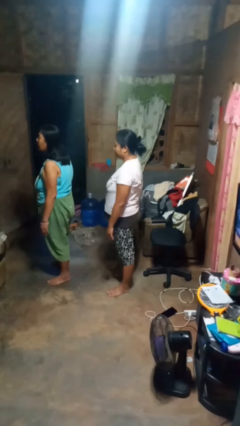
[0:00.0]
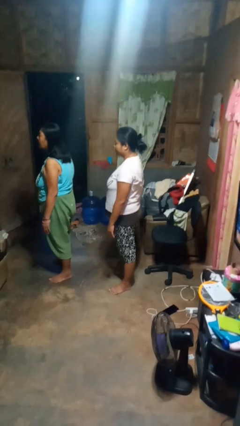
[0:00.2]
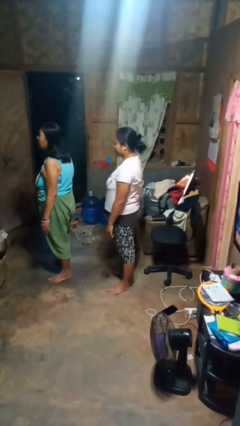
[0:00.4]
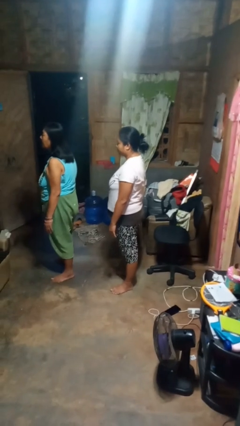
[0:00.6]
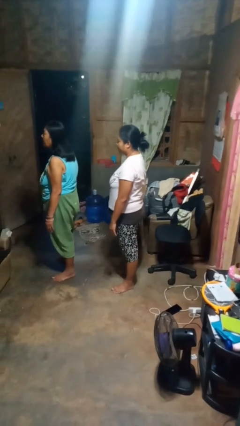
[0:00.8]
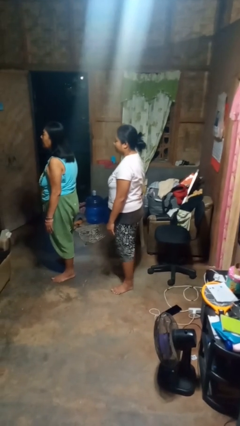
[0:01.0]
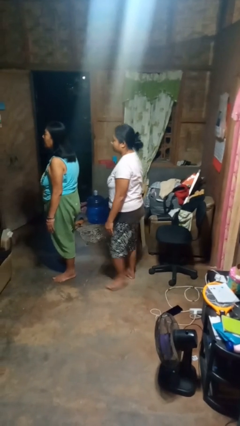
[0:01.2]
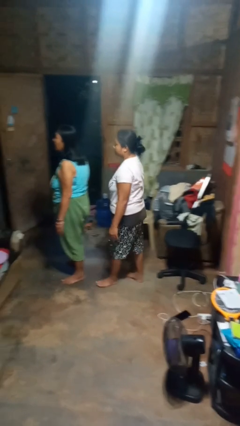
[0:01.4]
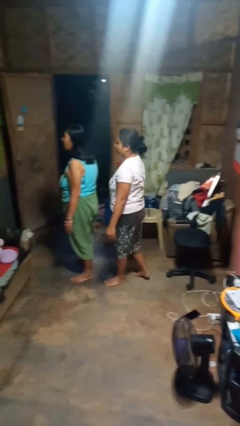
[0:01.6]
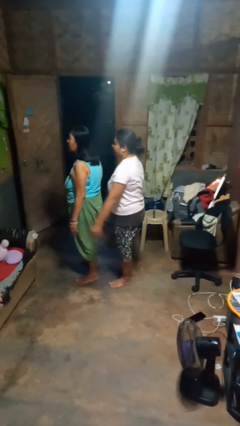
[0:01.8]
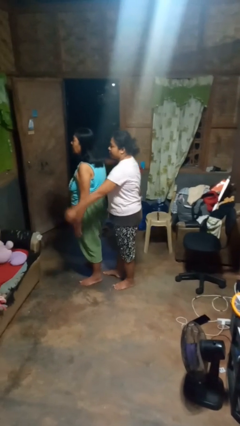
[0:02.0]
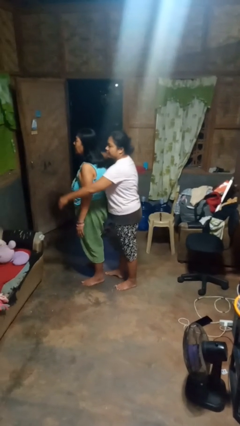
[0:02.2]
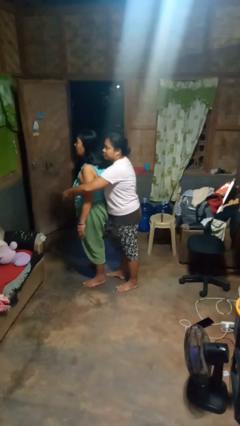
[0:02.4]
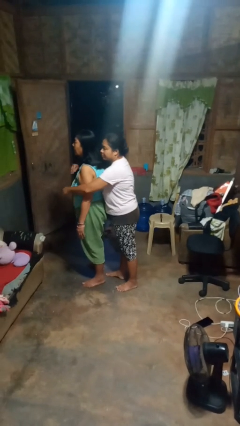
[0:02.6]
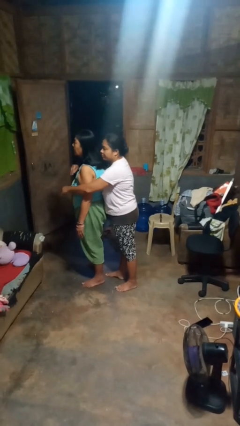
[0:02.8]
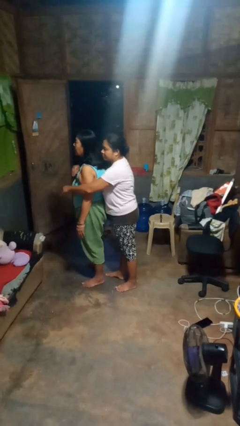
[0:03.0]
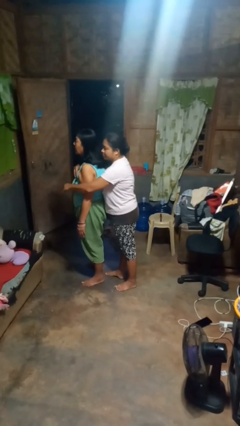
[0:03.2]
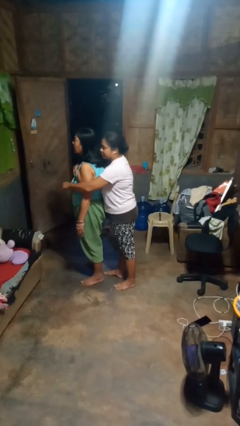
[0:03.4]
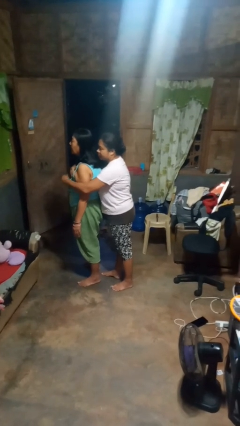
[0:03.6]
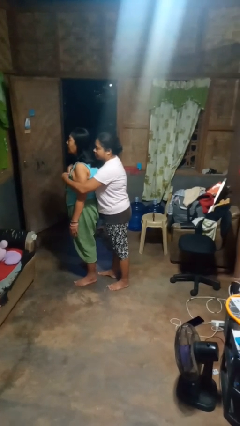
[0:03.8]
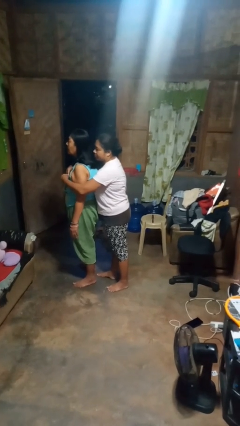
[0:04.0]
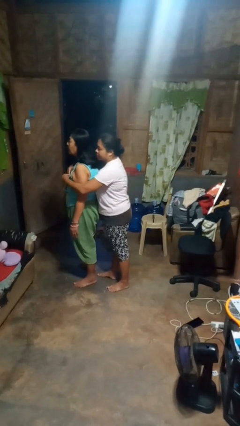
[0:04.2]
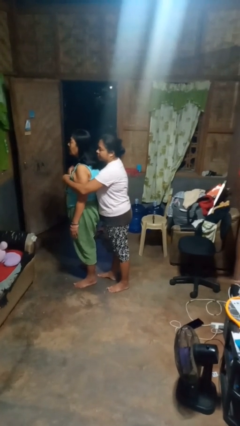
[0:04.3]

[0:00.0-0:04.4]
person hugs person from behind

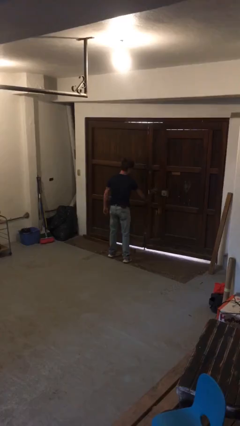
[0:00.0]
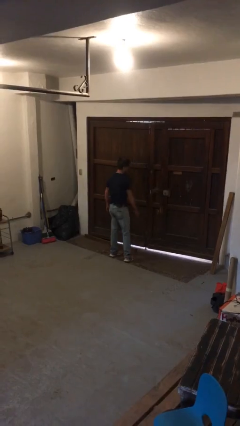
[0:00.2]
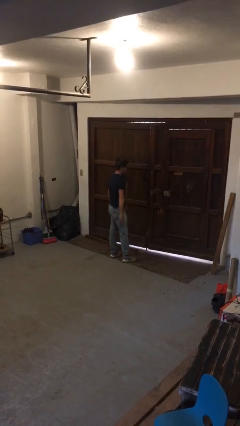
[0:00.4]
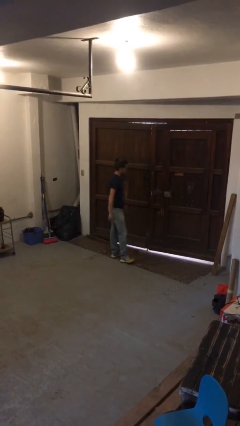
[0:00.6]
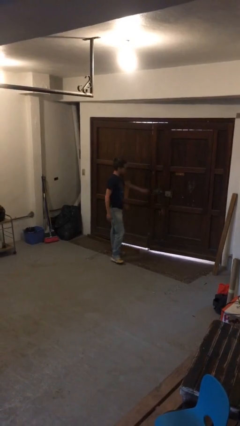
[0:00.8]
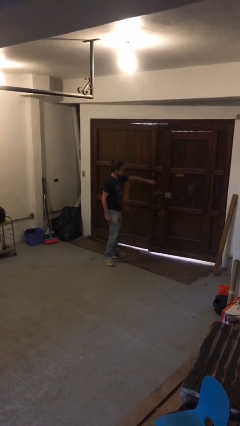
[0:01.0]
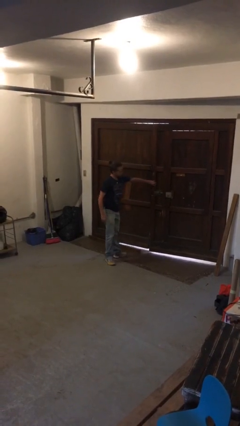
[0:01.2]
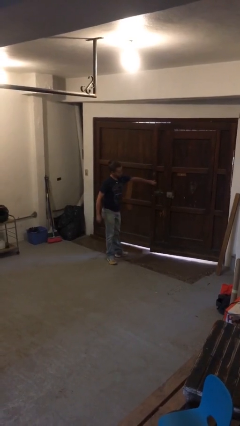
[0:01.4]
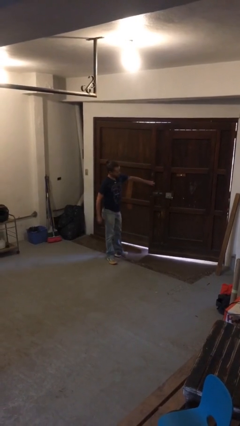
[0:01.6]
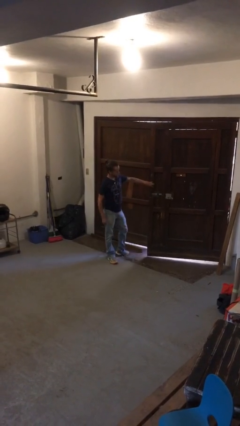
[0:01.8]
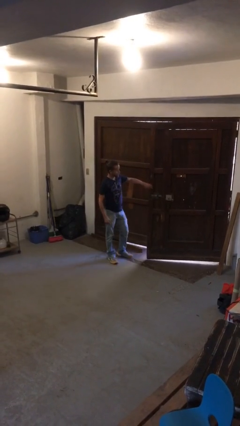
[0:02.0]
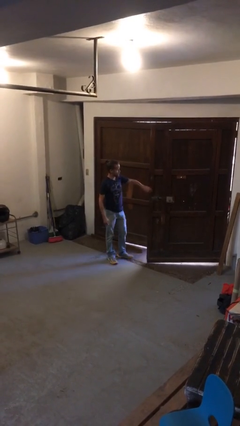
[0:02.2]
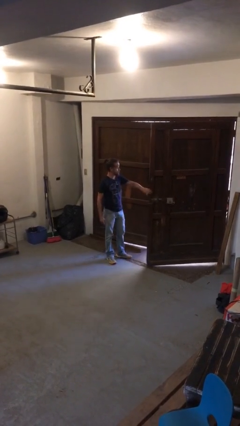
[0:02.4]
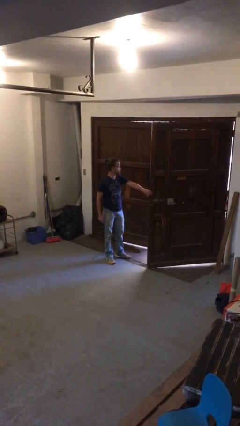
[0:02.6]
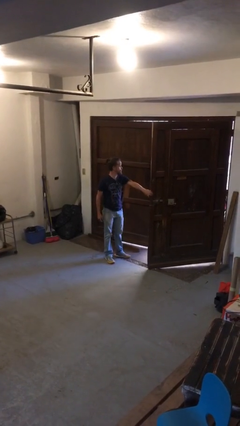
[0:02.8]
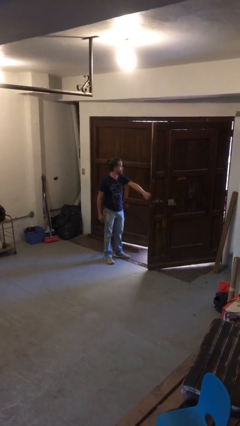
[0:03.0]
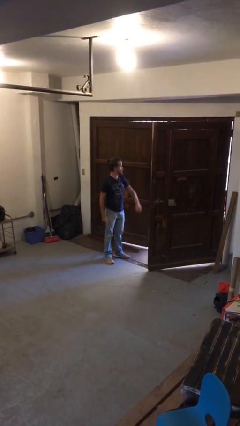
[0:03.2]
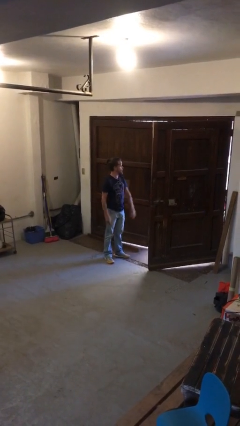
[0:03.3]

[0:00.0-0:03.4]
person opens gate

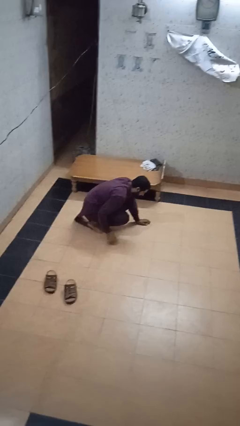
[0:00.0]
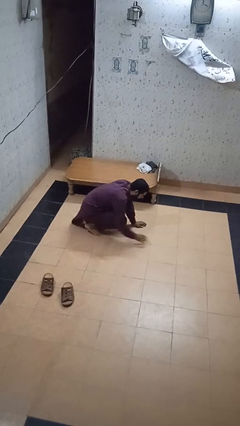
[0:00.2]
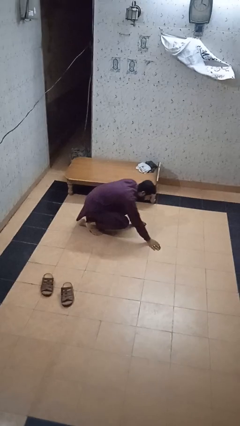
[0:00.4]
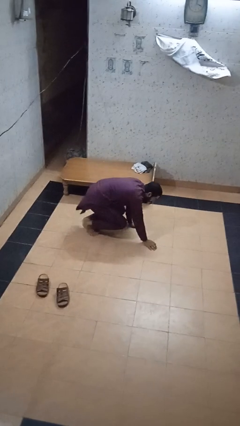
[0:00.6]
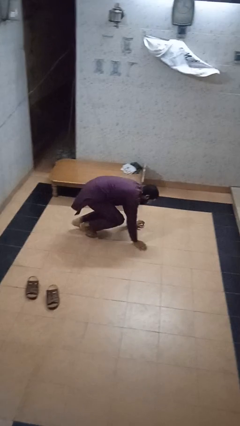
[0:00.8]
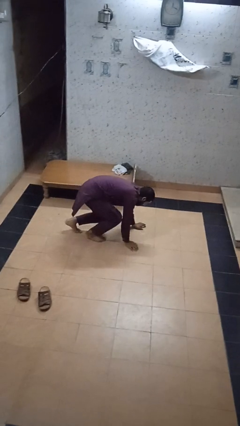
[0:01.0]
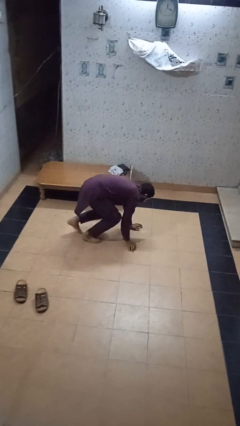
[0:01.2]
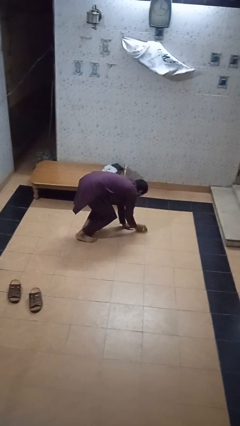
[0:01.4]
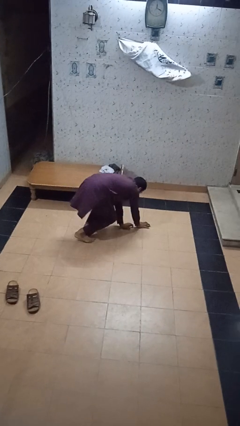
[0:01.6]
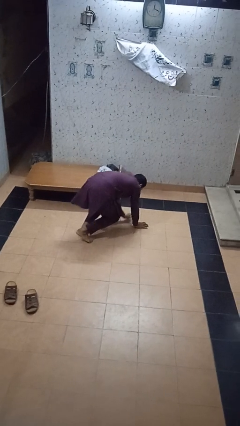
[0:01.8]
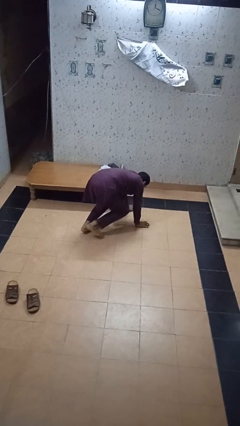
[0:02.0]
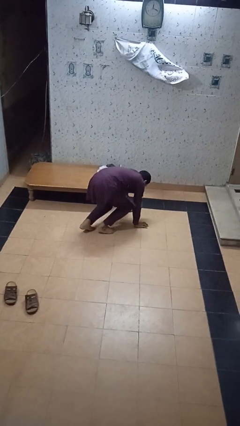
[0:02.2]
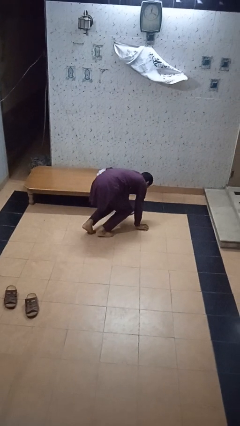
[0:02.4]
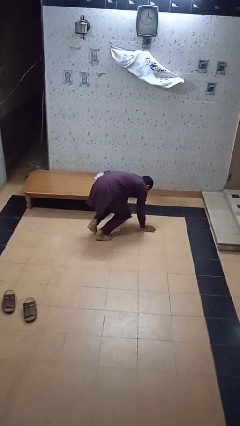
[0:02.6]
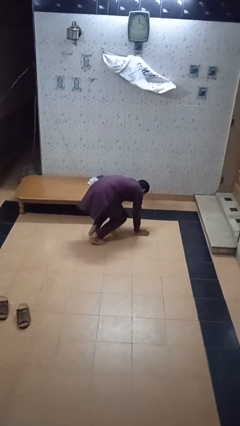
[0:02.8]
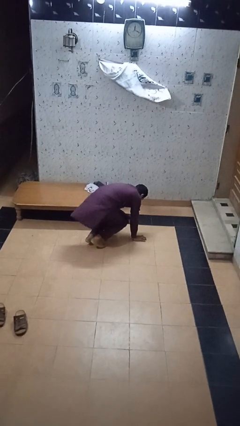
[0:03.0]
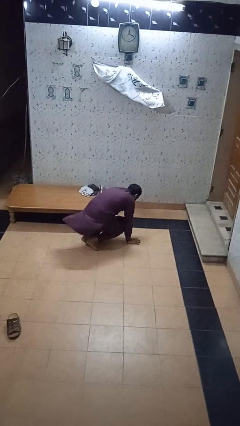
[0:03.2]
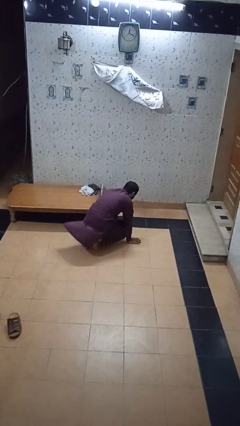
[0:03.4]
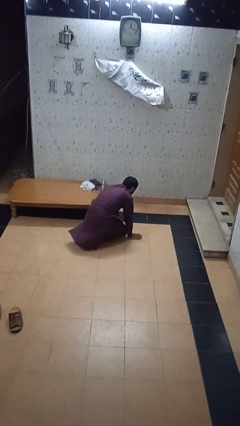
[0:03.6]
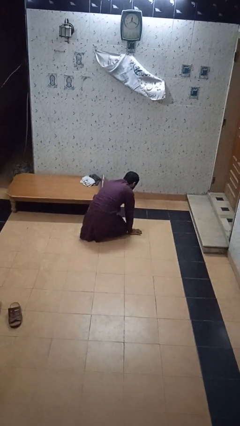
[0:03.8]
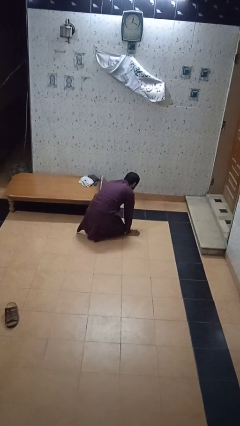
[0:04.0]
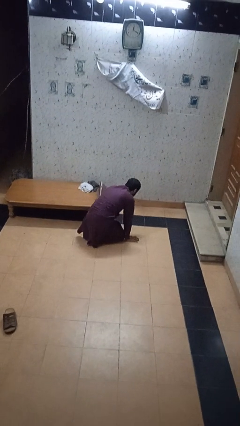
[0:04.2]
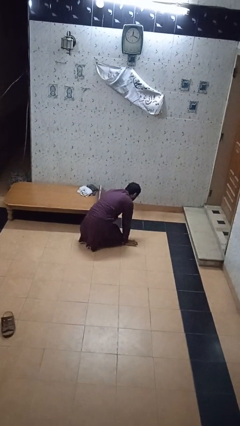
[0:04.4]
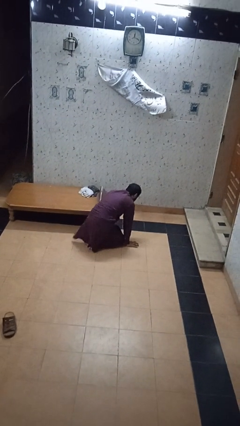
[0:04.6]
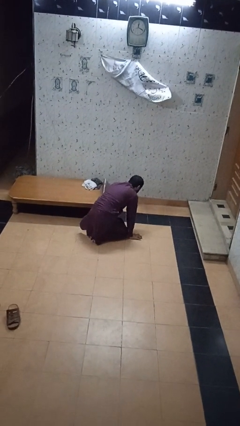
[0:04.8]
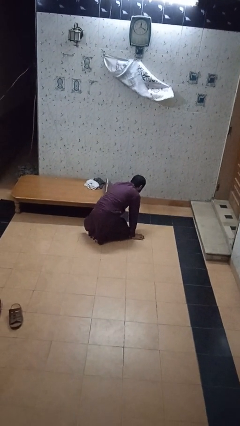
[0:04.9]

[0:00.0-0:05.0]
person crawls

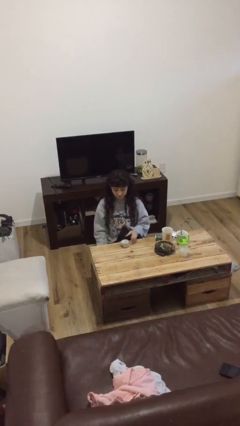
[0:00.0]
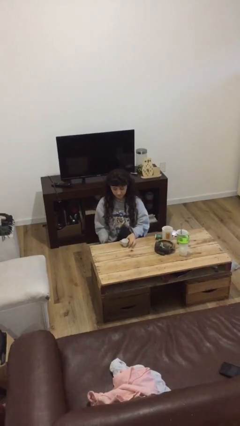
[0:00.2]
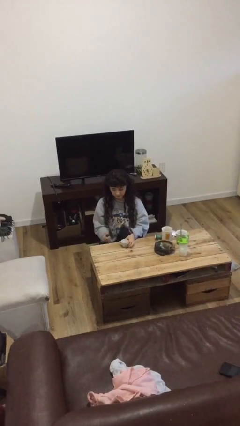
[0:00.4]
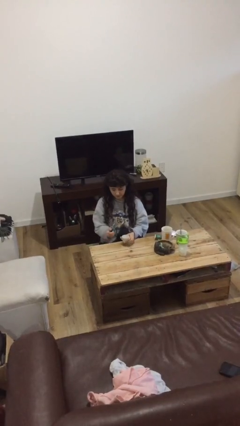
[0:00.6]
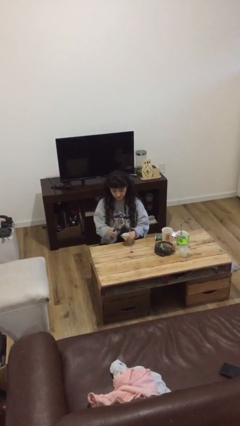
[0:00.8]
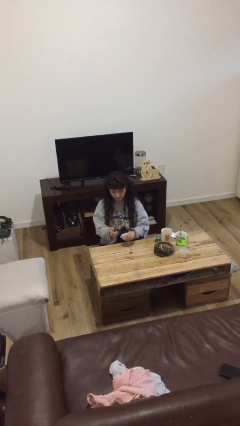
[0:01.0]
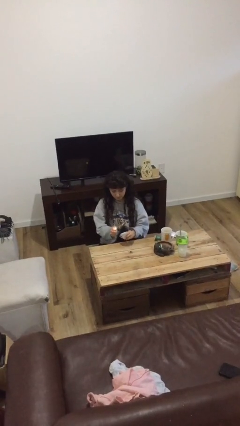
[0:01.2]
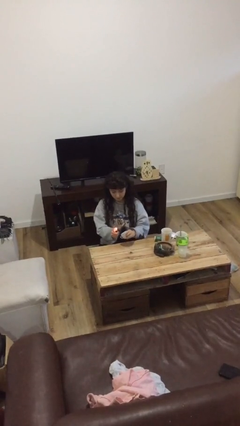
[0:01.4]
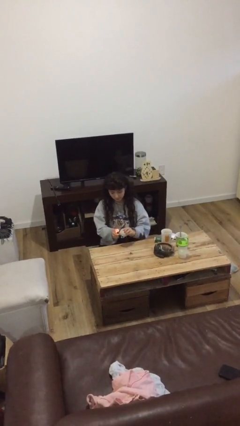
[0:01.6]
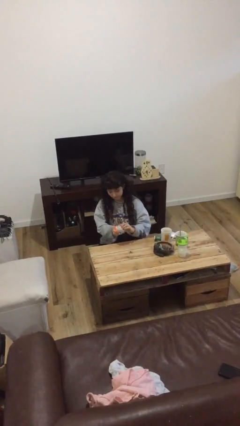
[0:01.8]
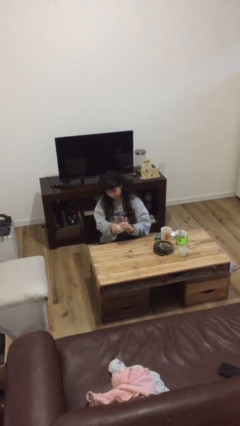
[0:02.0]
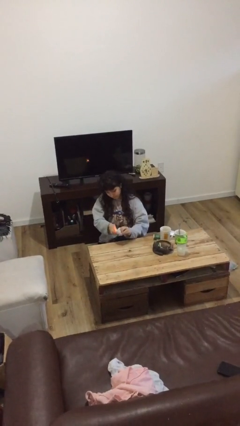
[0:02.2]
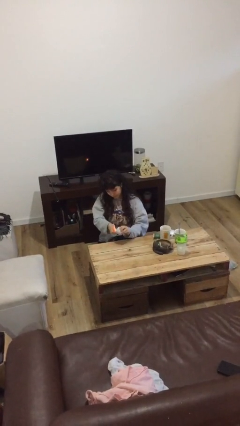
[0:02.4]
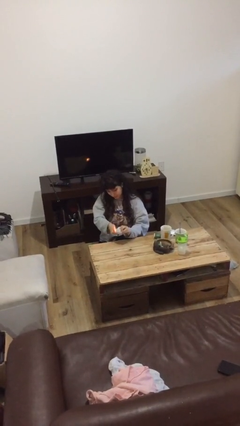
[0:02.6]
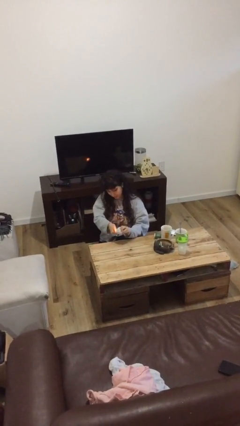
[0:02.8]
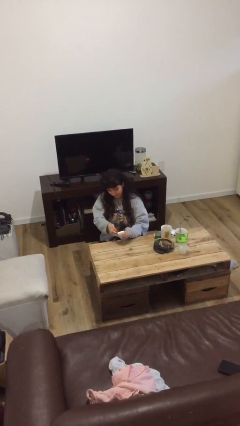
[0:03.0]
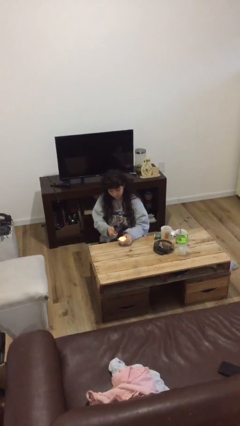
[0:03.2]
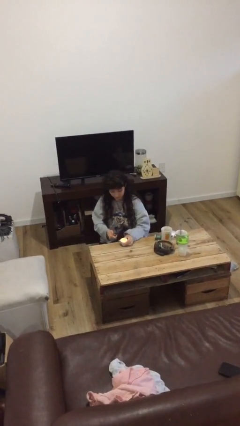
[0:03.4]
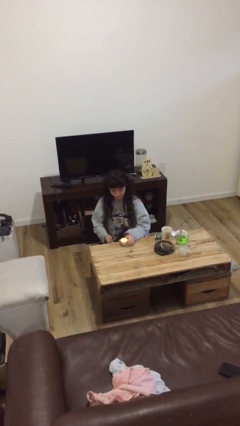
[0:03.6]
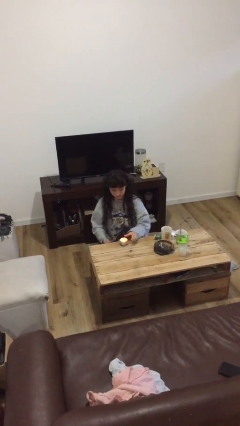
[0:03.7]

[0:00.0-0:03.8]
person lights candle

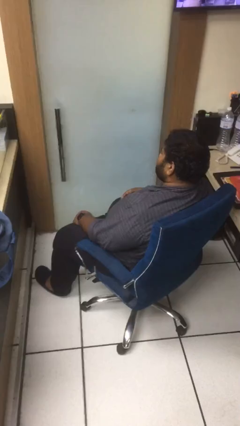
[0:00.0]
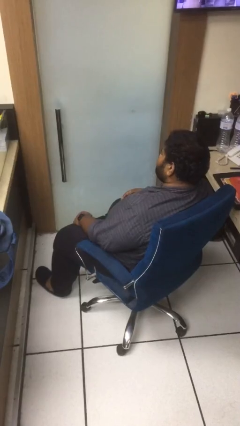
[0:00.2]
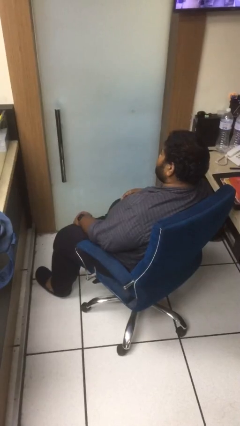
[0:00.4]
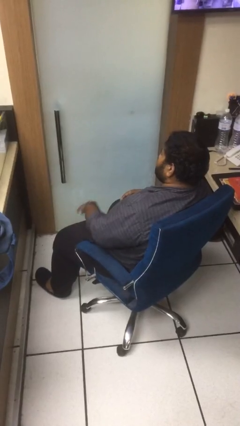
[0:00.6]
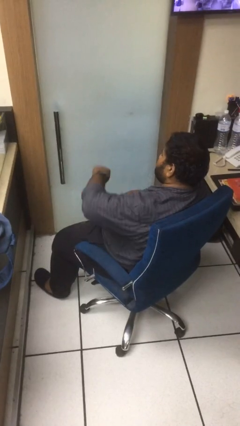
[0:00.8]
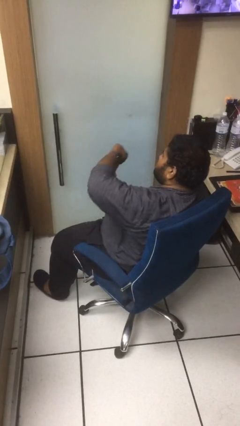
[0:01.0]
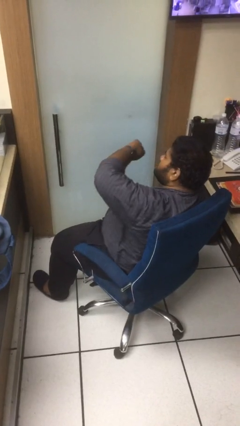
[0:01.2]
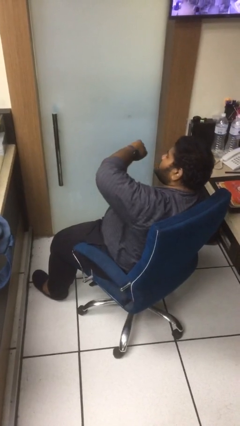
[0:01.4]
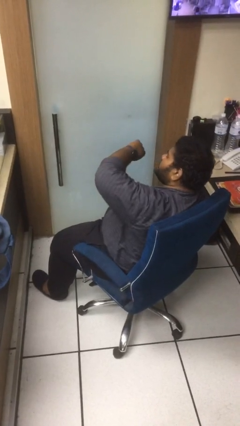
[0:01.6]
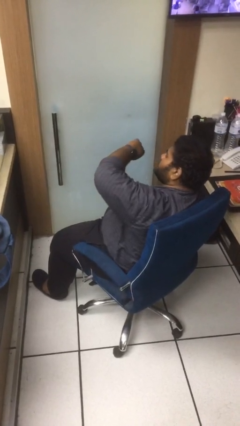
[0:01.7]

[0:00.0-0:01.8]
person looks at wristwatch
